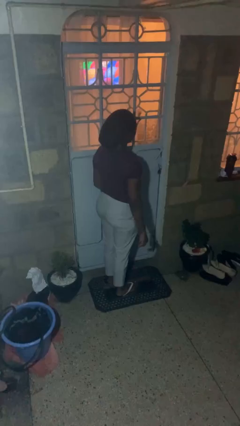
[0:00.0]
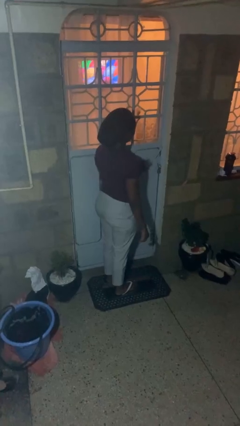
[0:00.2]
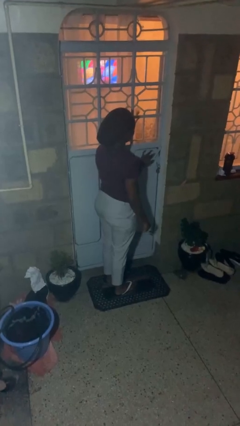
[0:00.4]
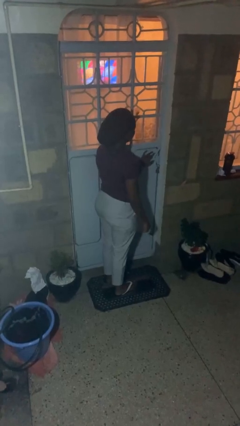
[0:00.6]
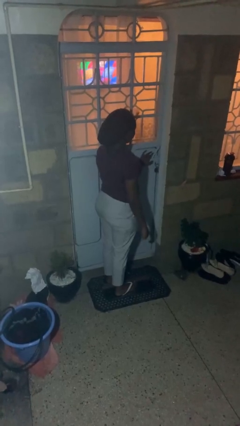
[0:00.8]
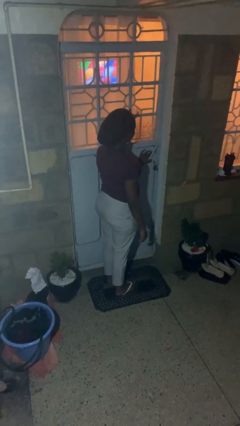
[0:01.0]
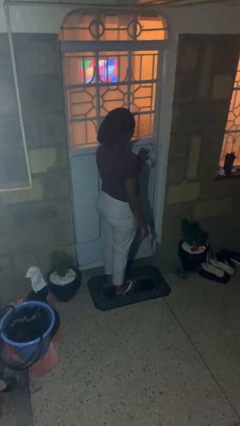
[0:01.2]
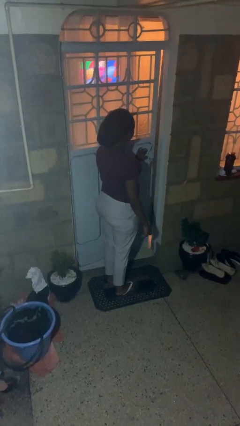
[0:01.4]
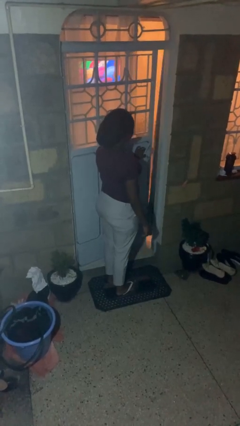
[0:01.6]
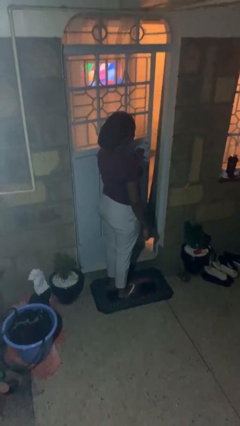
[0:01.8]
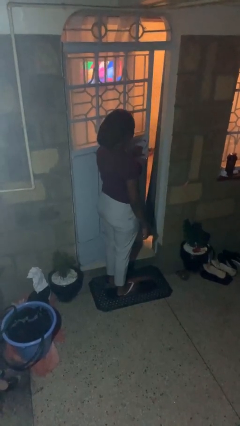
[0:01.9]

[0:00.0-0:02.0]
person opens facility door

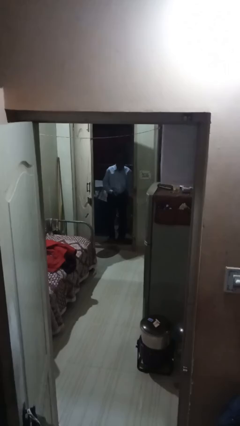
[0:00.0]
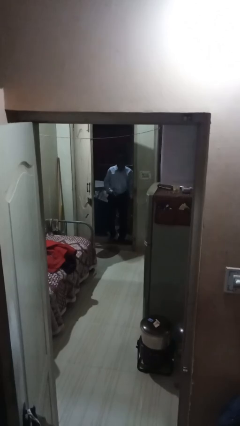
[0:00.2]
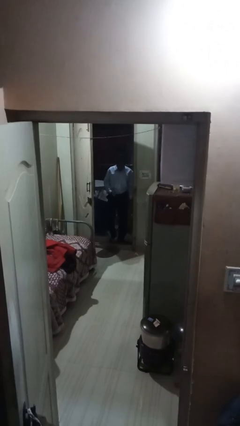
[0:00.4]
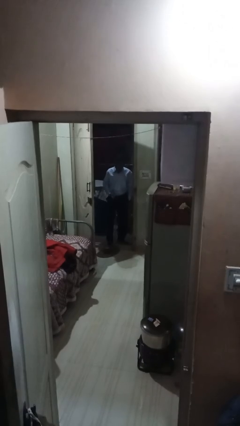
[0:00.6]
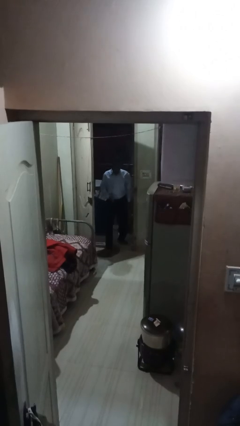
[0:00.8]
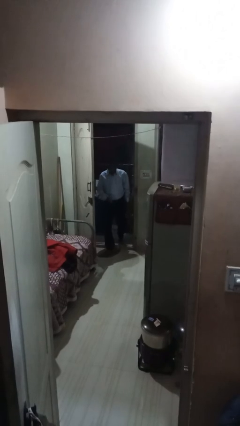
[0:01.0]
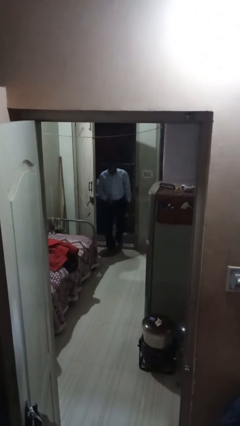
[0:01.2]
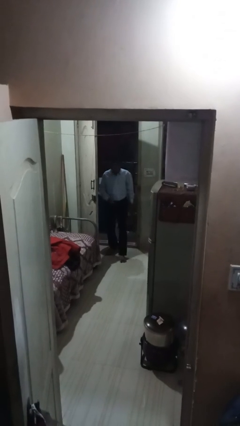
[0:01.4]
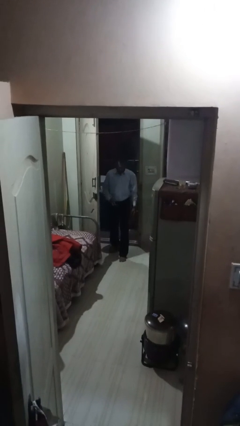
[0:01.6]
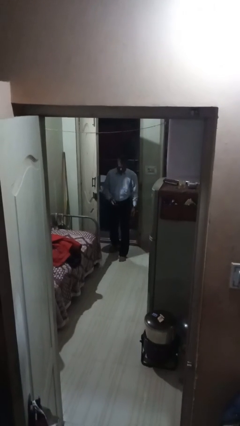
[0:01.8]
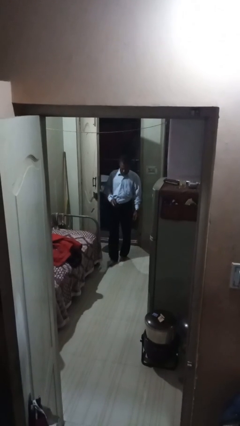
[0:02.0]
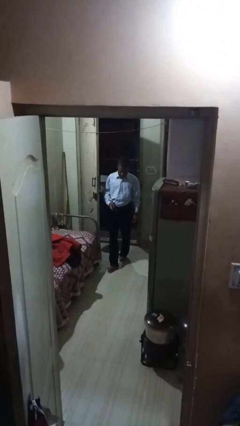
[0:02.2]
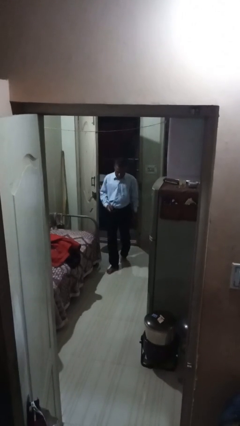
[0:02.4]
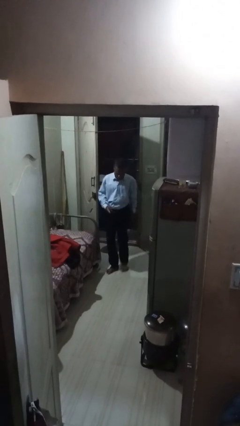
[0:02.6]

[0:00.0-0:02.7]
person enters scene through structure

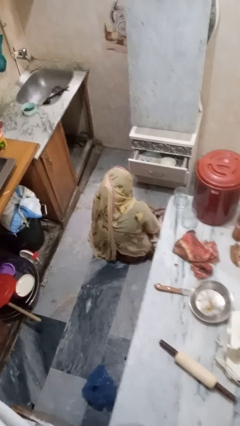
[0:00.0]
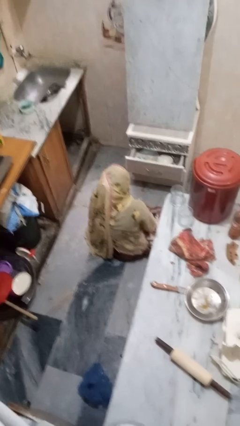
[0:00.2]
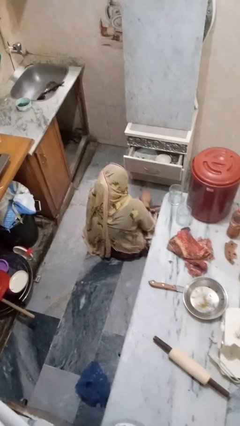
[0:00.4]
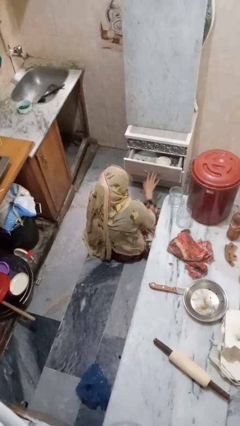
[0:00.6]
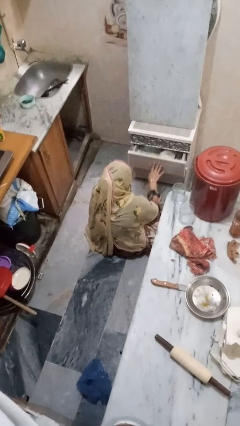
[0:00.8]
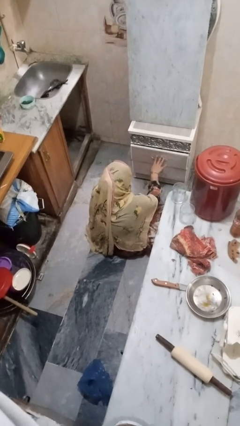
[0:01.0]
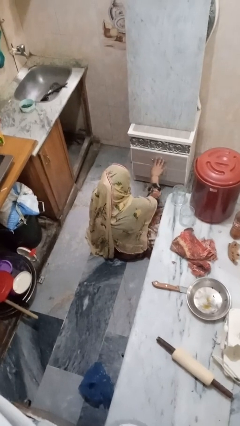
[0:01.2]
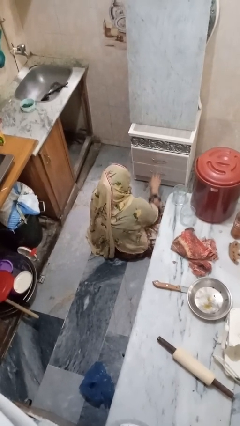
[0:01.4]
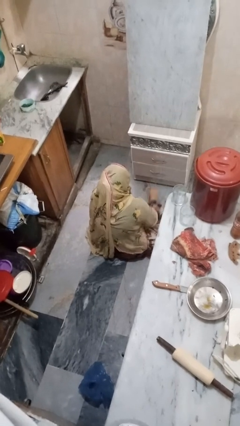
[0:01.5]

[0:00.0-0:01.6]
person closes kitchen drawer

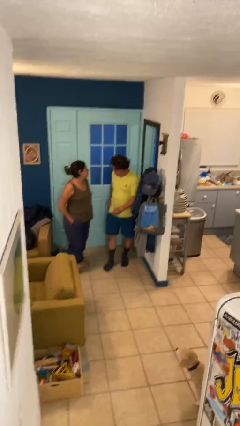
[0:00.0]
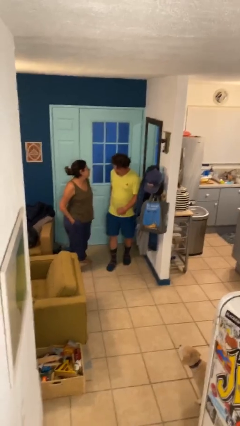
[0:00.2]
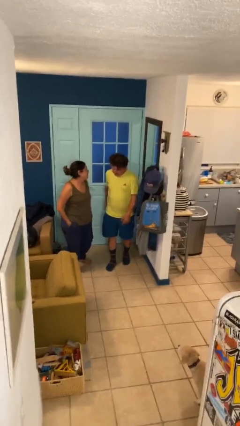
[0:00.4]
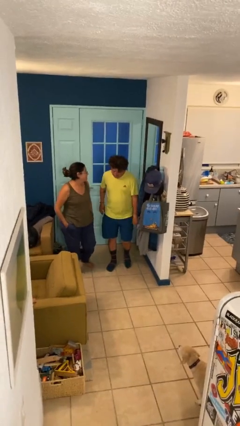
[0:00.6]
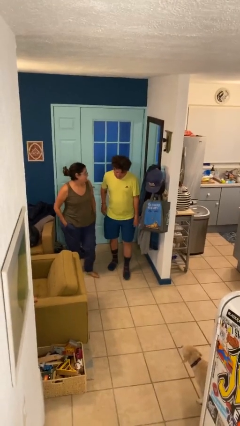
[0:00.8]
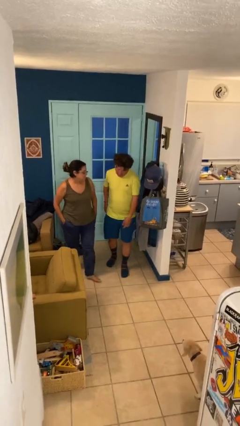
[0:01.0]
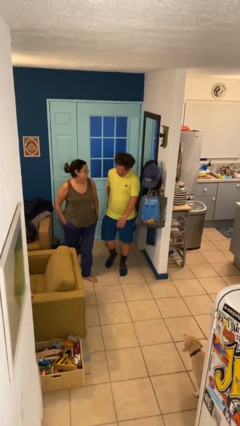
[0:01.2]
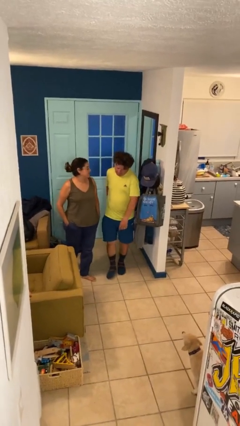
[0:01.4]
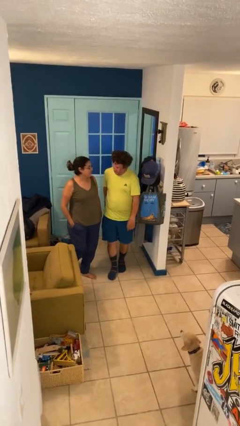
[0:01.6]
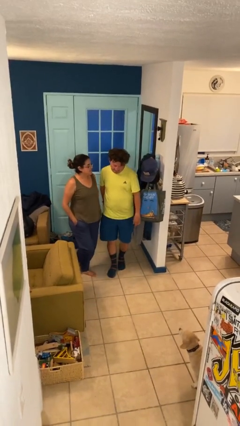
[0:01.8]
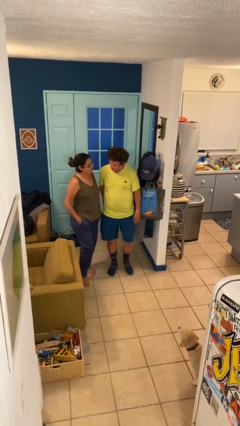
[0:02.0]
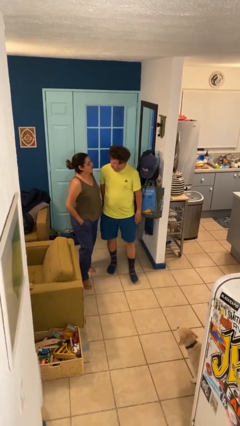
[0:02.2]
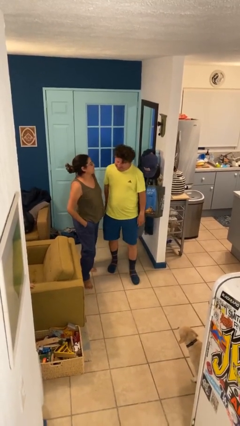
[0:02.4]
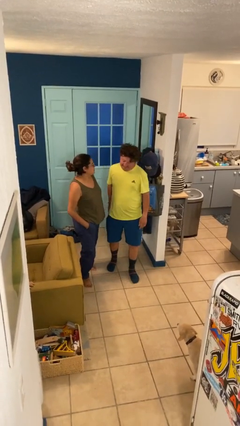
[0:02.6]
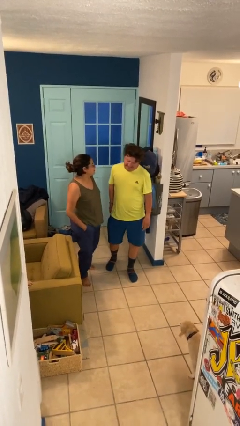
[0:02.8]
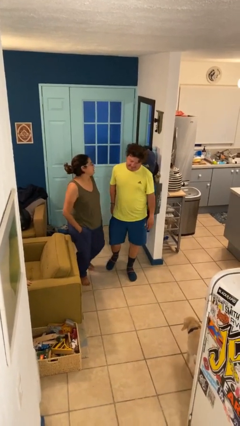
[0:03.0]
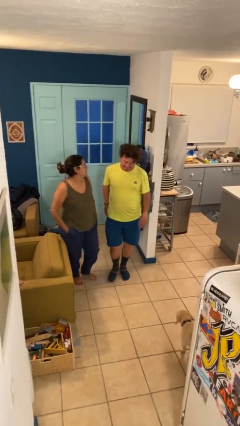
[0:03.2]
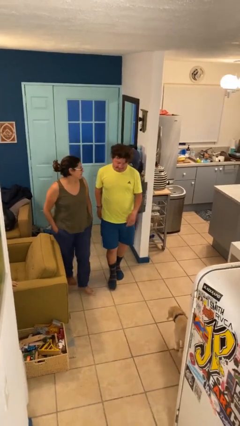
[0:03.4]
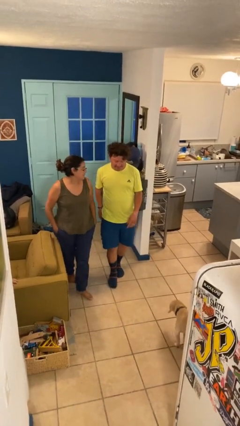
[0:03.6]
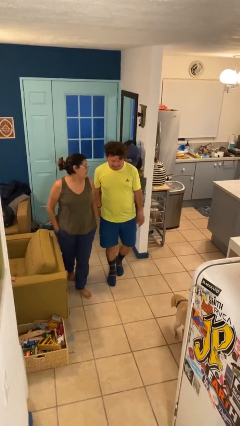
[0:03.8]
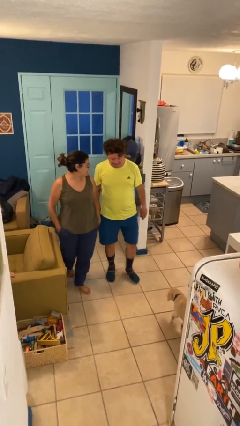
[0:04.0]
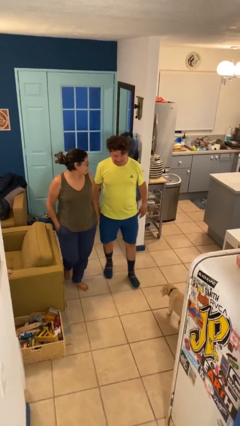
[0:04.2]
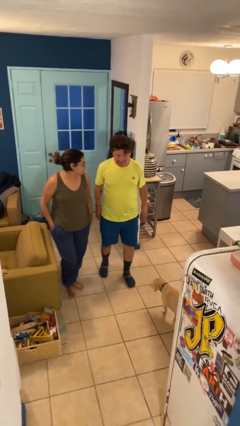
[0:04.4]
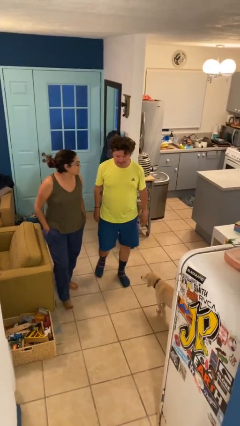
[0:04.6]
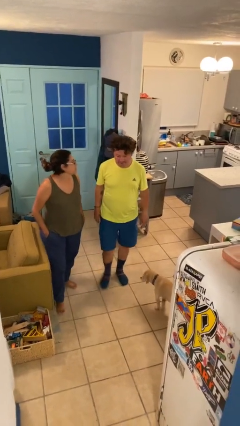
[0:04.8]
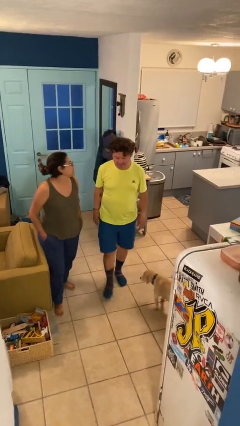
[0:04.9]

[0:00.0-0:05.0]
person talks to person

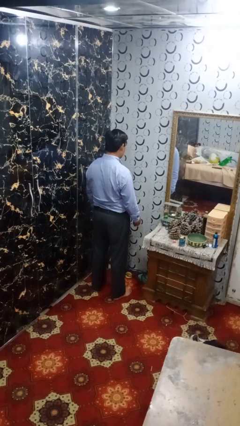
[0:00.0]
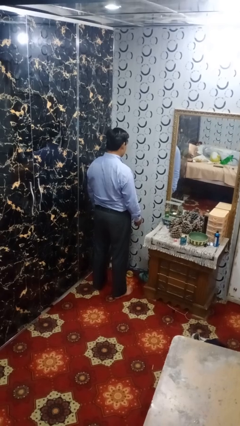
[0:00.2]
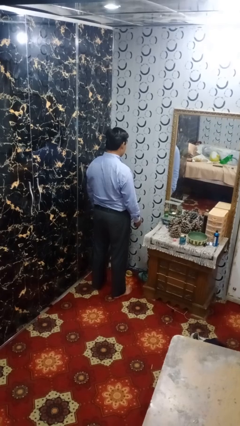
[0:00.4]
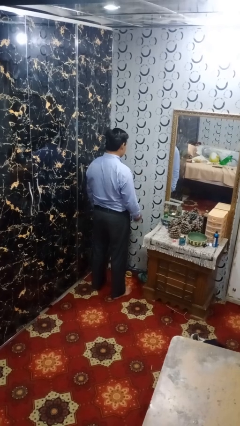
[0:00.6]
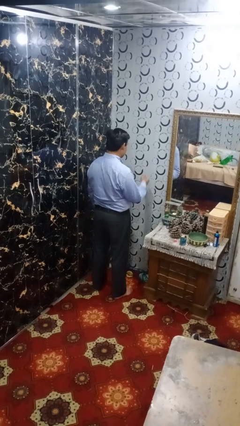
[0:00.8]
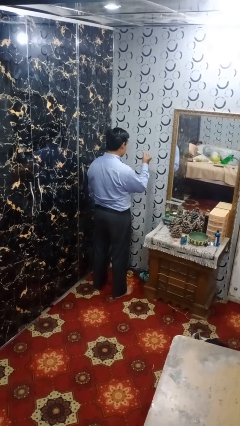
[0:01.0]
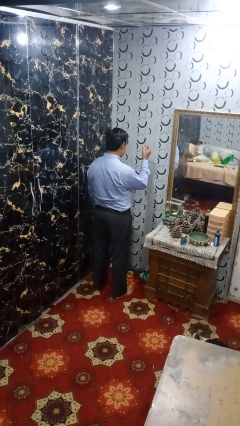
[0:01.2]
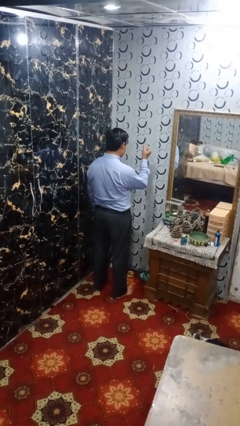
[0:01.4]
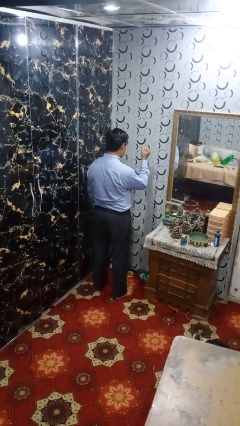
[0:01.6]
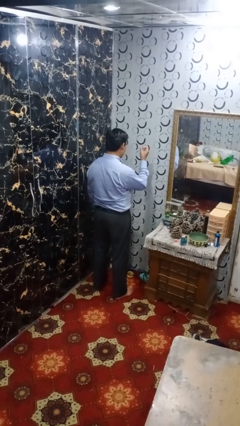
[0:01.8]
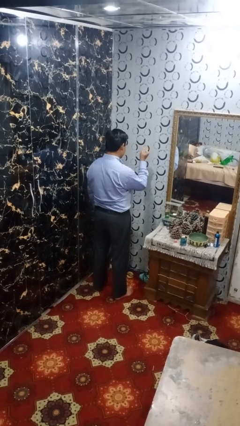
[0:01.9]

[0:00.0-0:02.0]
person snaps fingers

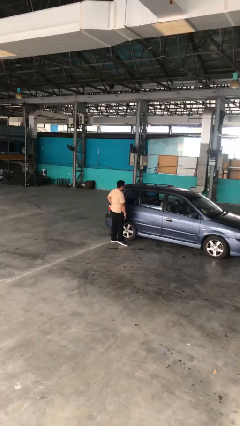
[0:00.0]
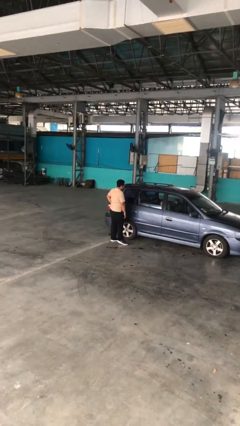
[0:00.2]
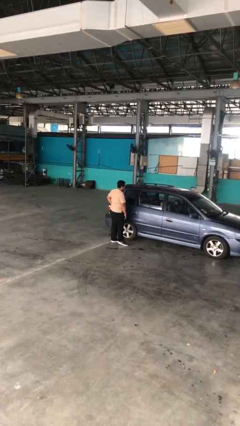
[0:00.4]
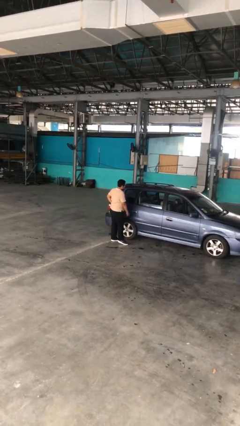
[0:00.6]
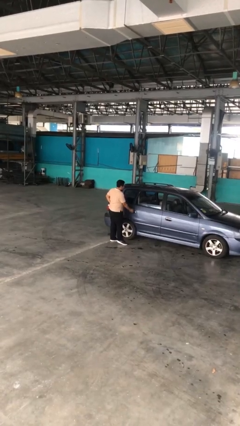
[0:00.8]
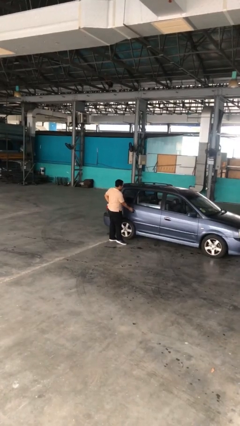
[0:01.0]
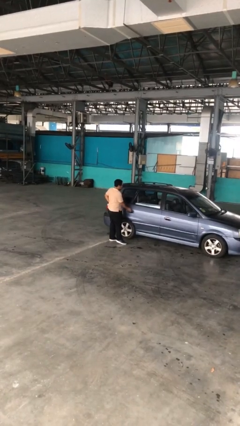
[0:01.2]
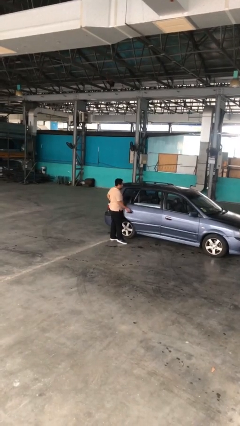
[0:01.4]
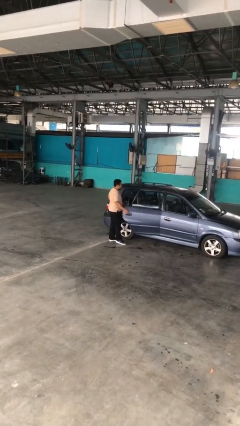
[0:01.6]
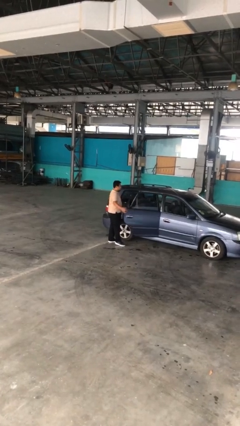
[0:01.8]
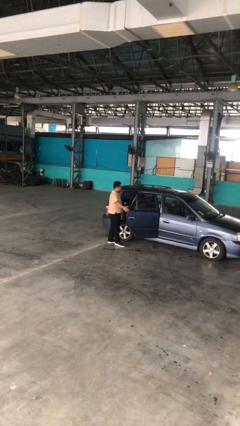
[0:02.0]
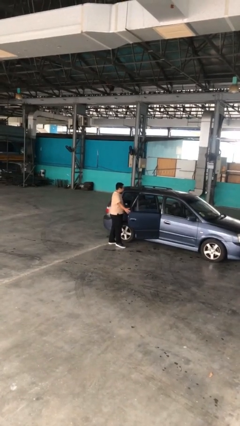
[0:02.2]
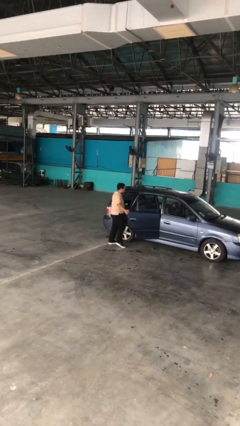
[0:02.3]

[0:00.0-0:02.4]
person opens car door

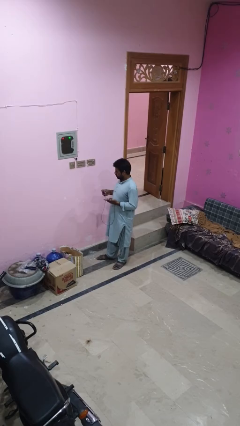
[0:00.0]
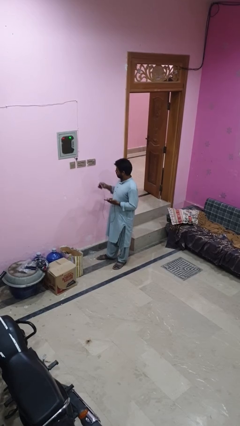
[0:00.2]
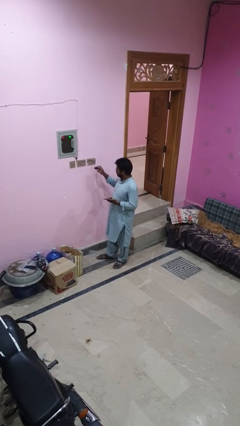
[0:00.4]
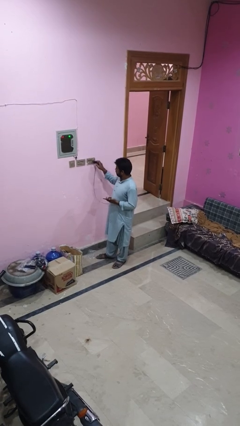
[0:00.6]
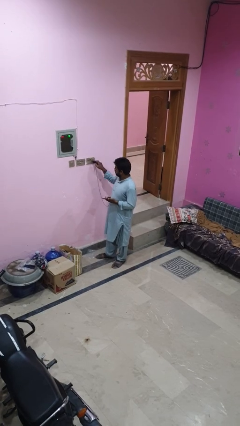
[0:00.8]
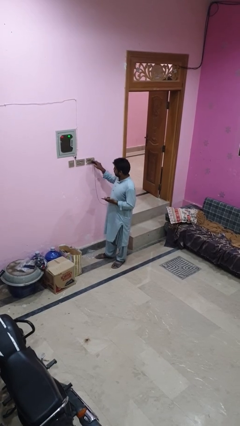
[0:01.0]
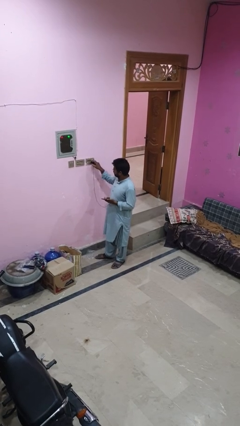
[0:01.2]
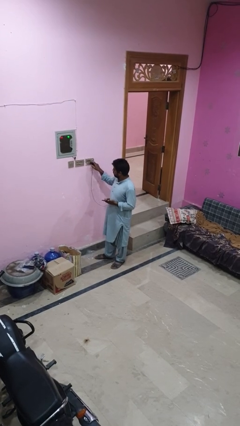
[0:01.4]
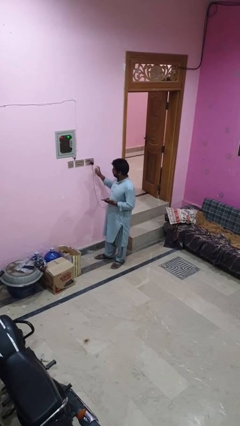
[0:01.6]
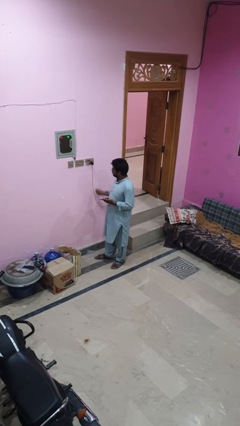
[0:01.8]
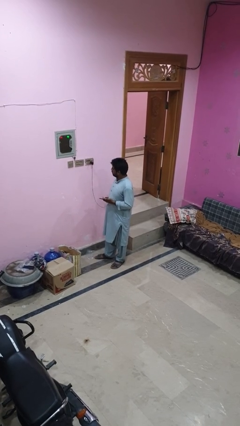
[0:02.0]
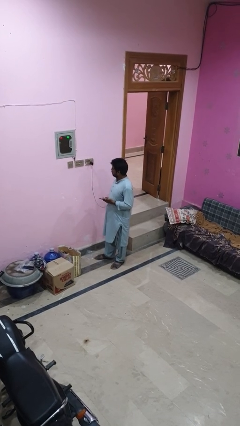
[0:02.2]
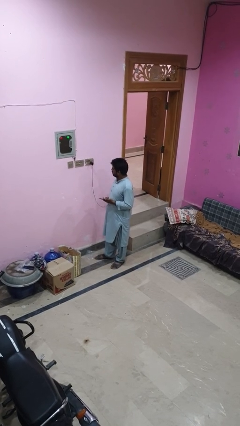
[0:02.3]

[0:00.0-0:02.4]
person plugs into electrical socket
